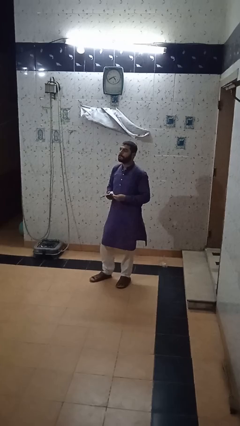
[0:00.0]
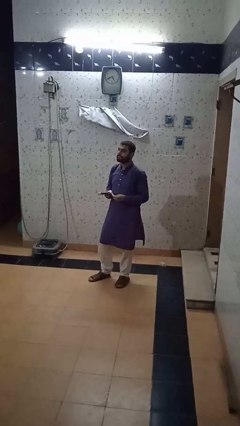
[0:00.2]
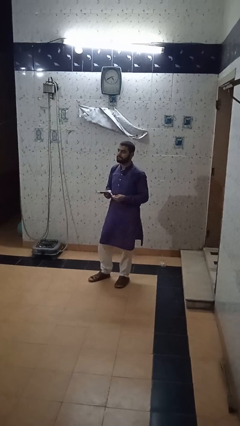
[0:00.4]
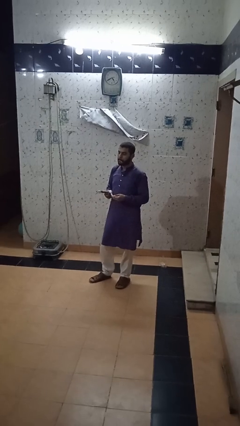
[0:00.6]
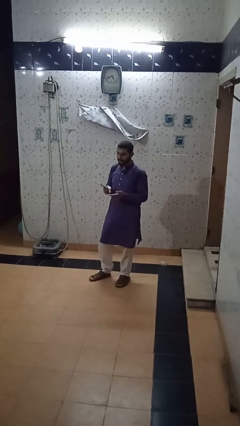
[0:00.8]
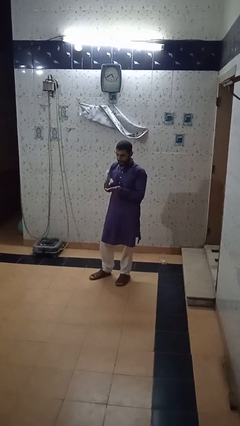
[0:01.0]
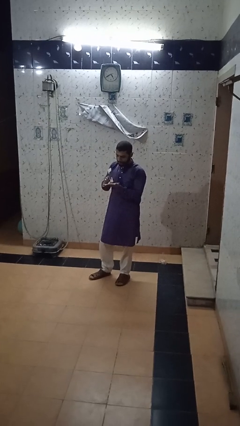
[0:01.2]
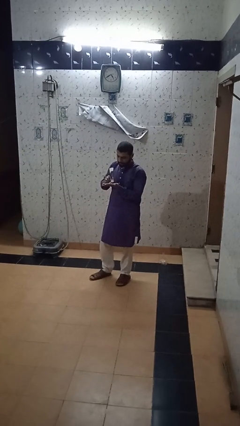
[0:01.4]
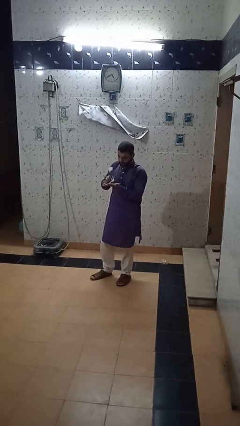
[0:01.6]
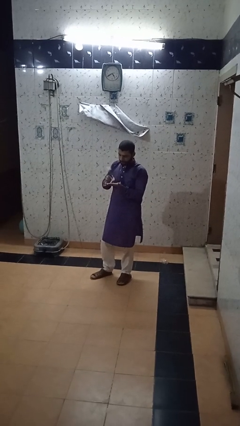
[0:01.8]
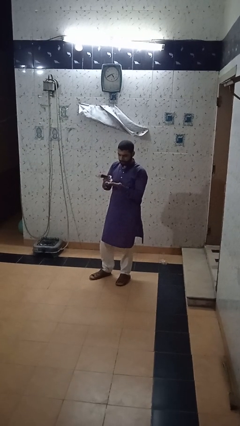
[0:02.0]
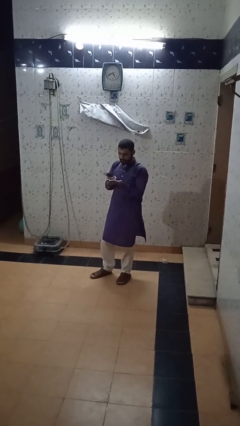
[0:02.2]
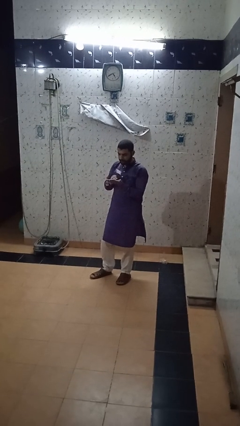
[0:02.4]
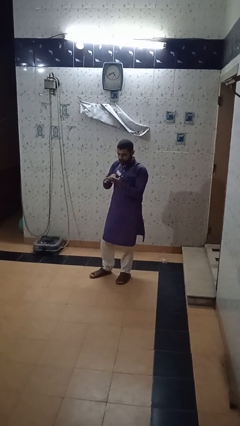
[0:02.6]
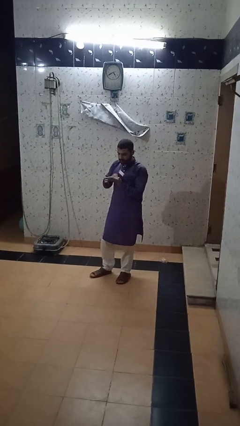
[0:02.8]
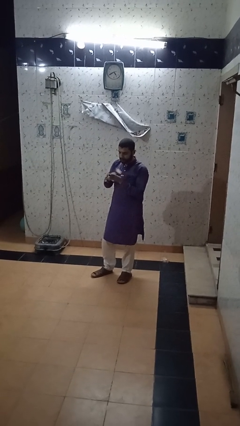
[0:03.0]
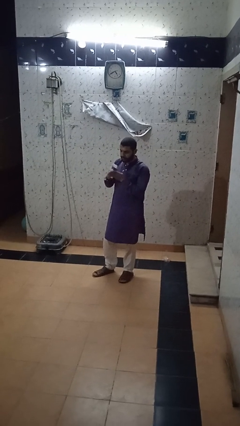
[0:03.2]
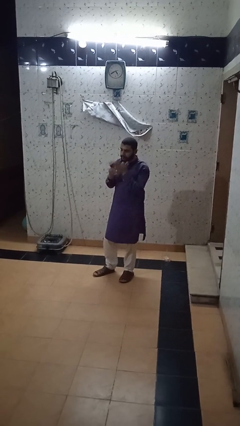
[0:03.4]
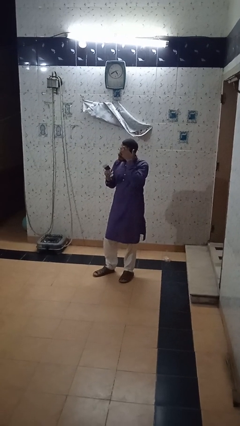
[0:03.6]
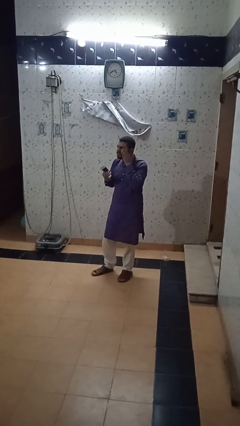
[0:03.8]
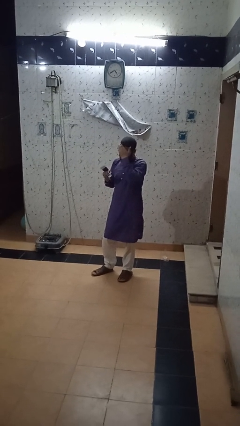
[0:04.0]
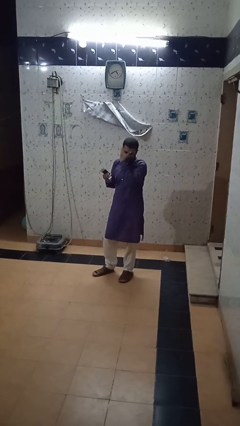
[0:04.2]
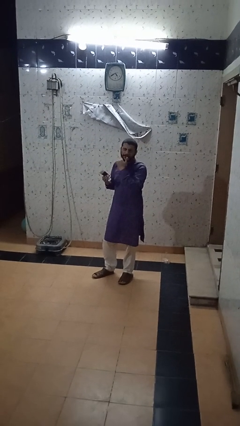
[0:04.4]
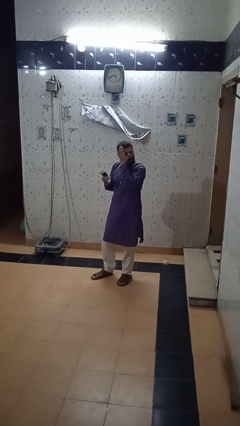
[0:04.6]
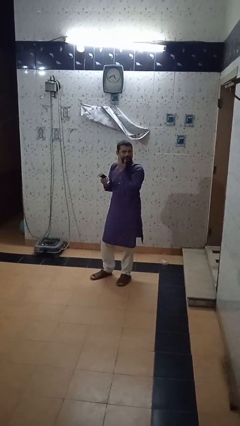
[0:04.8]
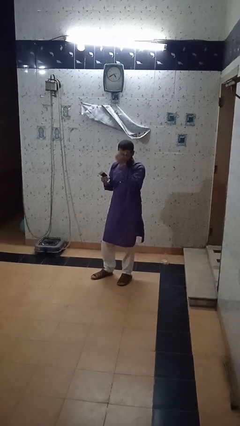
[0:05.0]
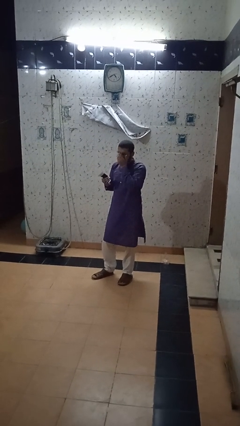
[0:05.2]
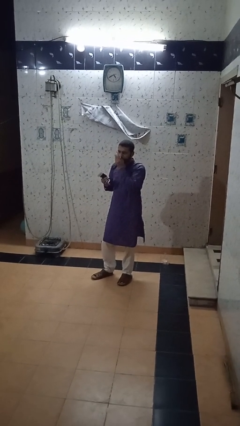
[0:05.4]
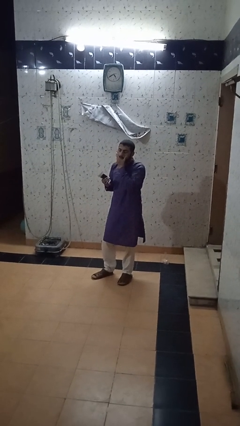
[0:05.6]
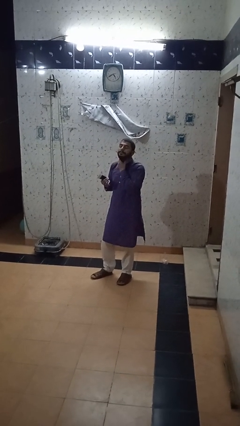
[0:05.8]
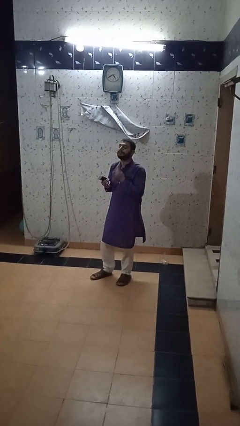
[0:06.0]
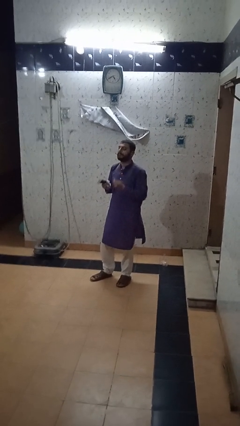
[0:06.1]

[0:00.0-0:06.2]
person applies facial moisturizer

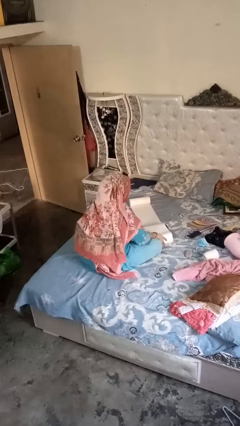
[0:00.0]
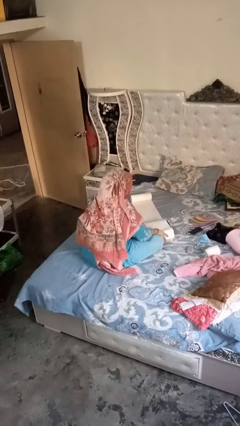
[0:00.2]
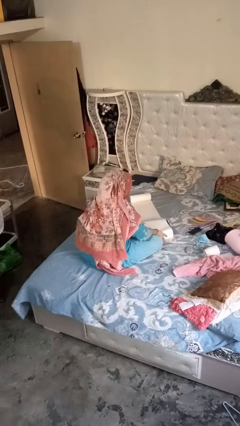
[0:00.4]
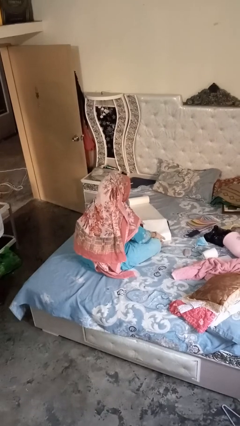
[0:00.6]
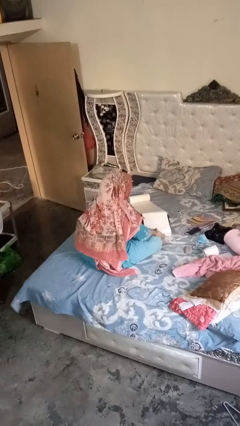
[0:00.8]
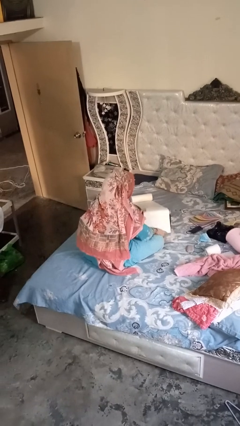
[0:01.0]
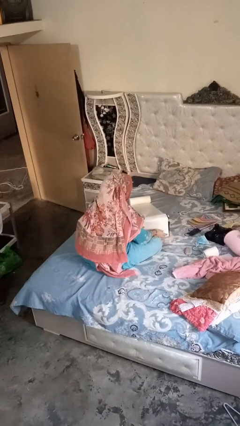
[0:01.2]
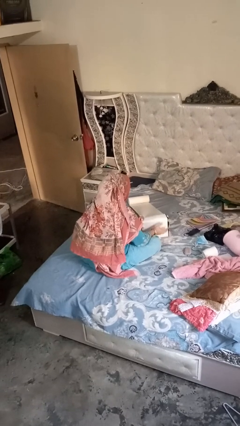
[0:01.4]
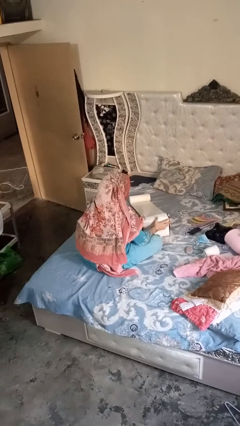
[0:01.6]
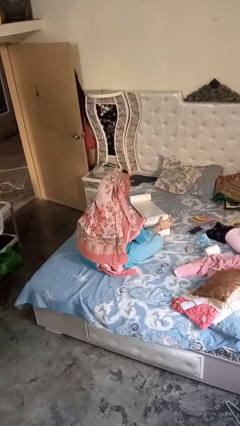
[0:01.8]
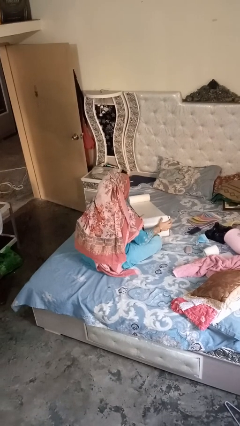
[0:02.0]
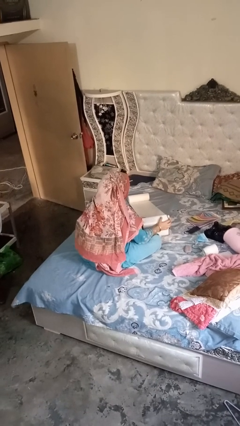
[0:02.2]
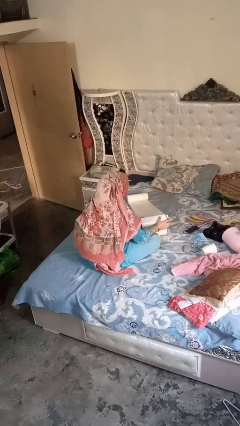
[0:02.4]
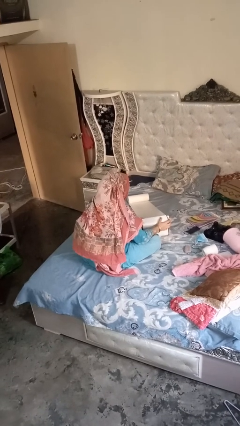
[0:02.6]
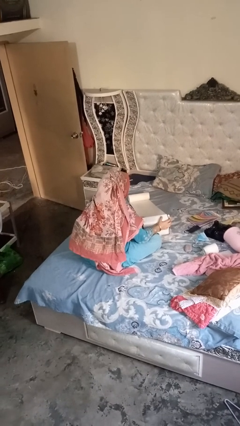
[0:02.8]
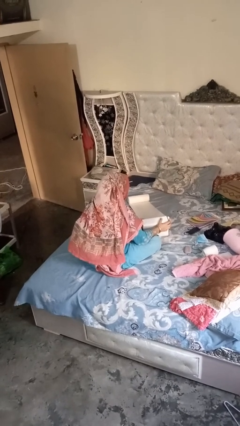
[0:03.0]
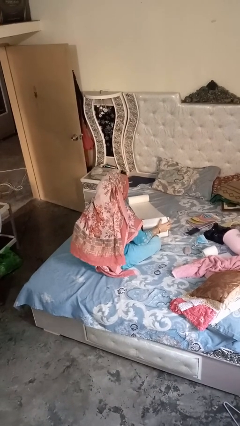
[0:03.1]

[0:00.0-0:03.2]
person wraps box

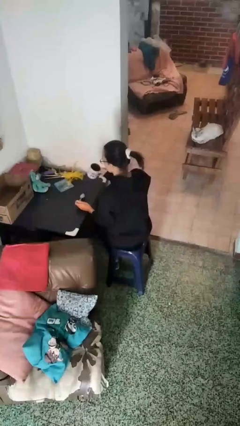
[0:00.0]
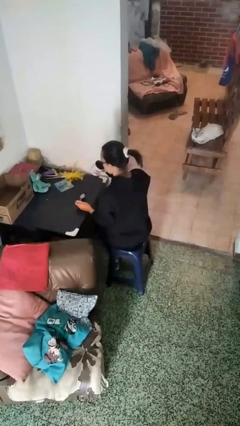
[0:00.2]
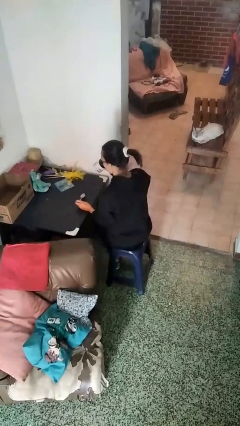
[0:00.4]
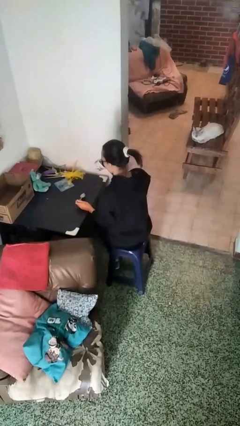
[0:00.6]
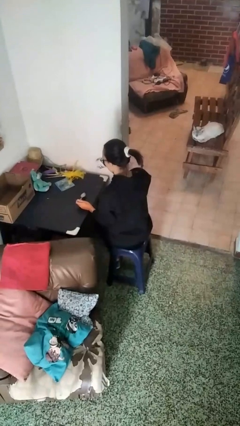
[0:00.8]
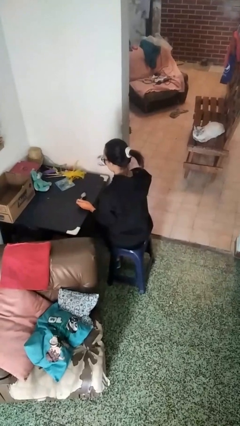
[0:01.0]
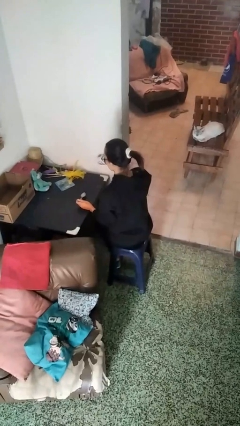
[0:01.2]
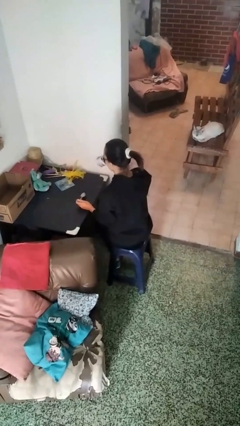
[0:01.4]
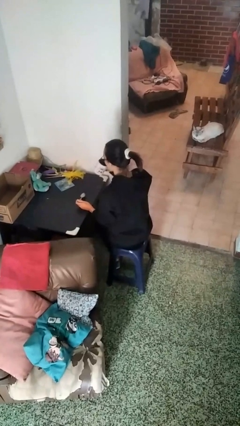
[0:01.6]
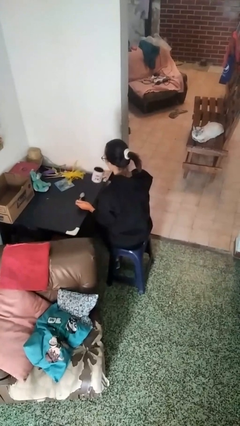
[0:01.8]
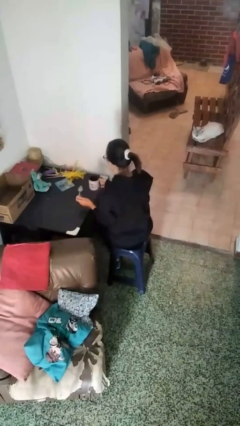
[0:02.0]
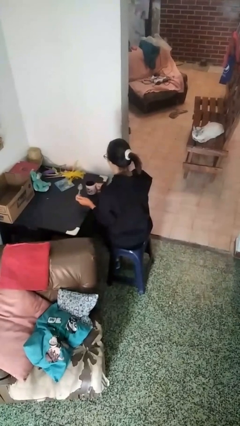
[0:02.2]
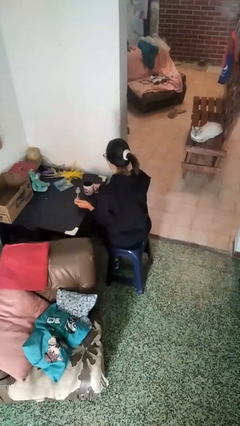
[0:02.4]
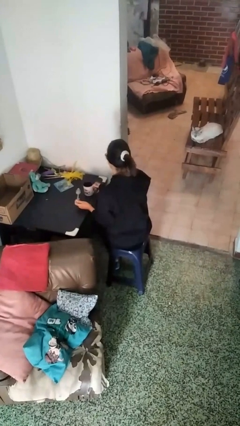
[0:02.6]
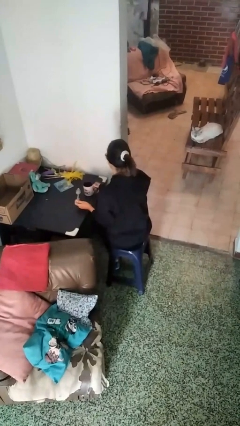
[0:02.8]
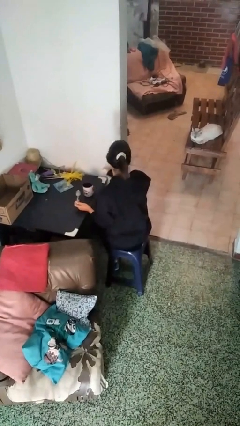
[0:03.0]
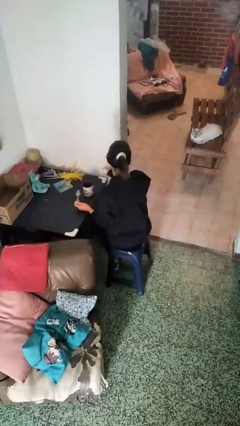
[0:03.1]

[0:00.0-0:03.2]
person drinks from mug

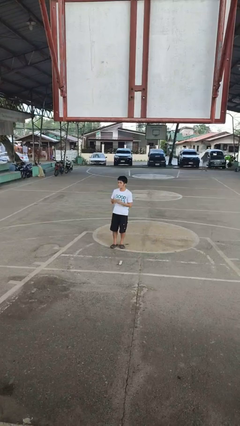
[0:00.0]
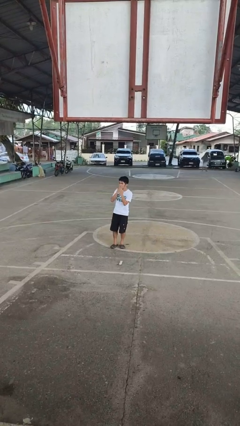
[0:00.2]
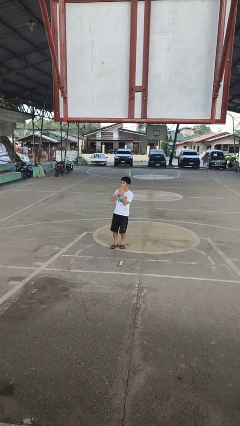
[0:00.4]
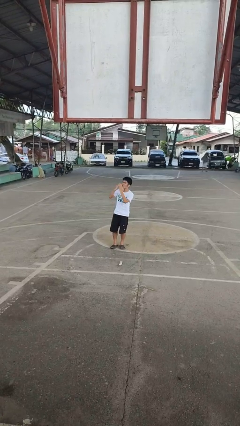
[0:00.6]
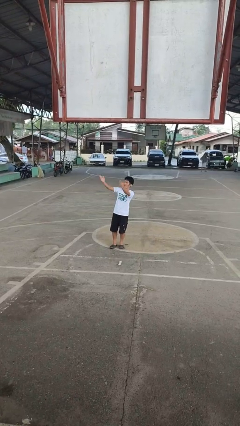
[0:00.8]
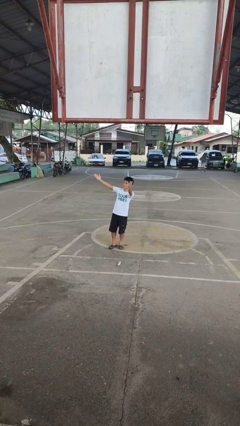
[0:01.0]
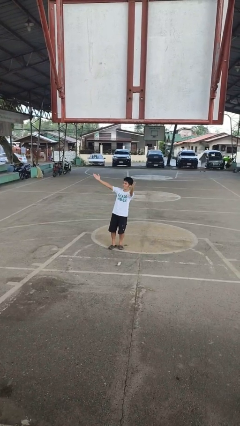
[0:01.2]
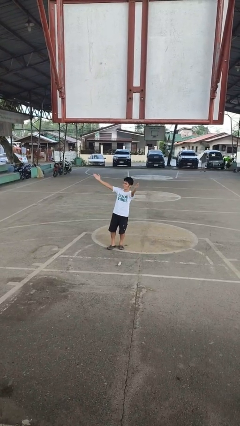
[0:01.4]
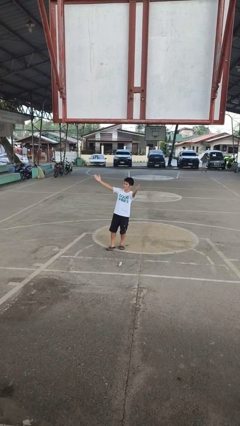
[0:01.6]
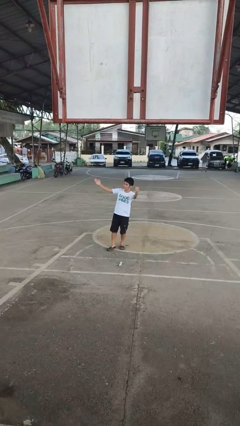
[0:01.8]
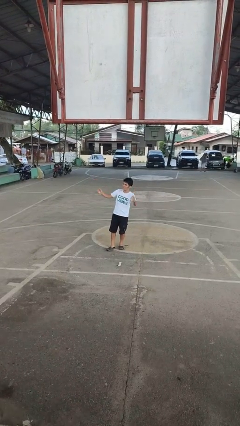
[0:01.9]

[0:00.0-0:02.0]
person gestures blow kiss

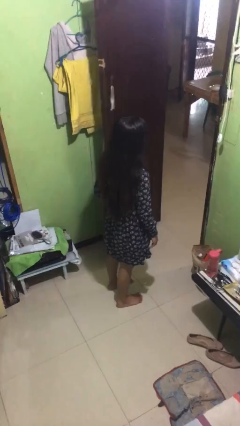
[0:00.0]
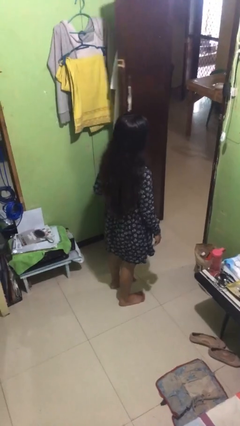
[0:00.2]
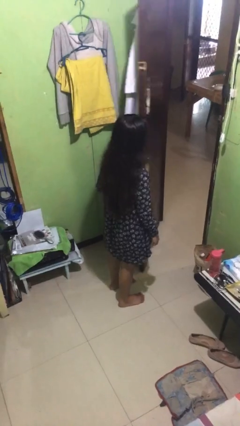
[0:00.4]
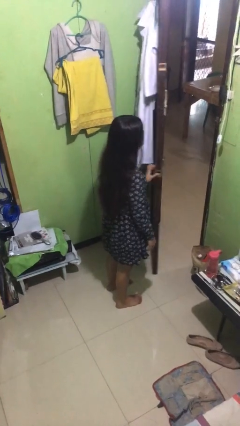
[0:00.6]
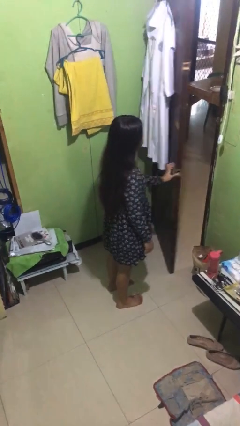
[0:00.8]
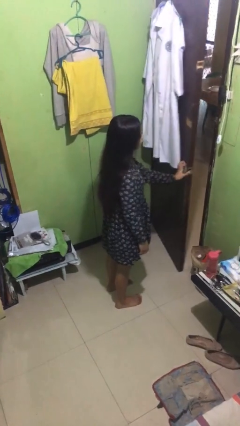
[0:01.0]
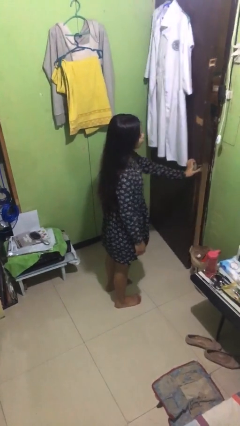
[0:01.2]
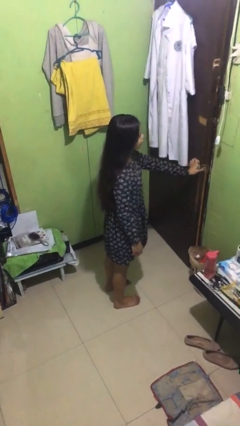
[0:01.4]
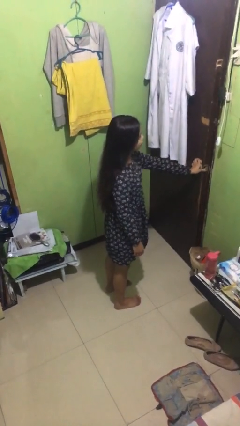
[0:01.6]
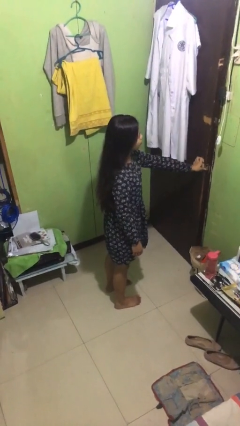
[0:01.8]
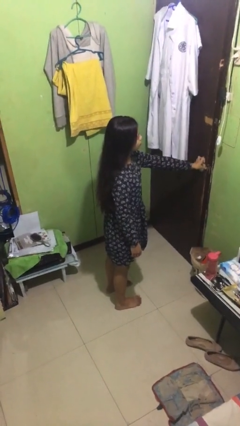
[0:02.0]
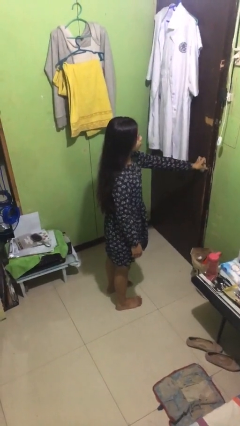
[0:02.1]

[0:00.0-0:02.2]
person closes facility door

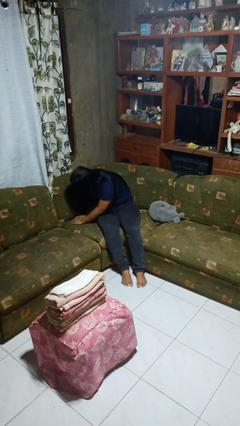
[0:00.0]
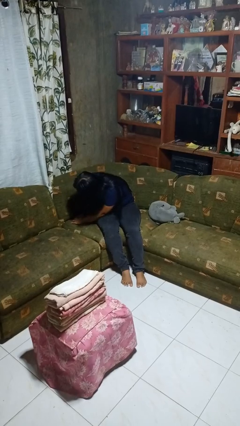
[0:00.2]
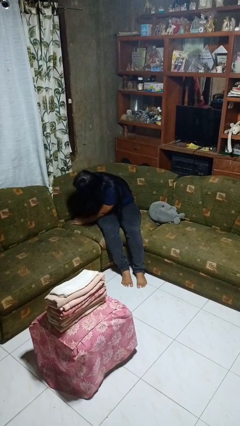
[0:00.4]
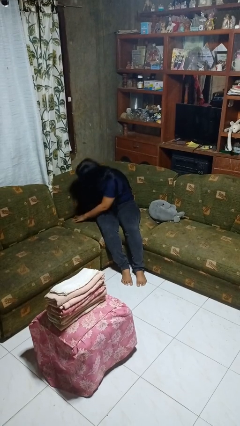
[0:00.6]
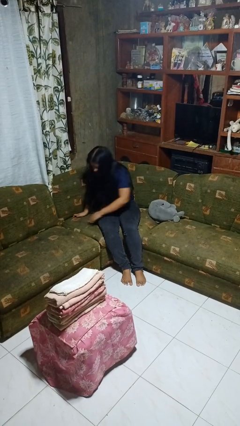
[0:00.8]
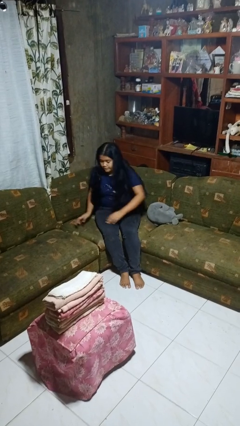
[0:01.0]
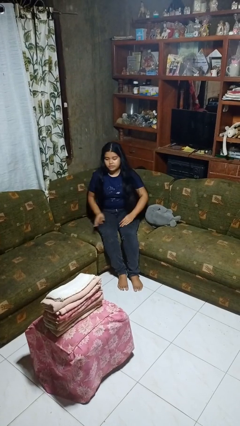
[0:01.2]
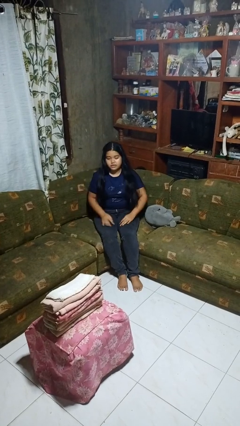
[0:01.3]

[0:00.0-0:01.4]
person searches in couch
